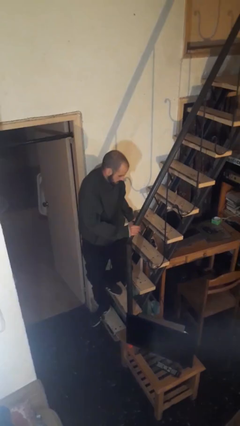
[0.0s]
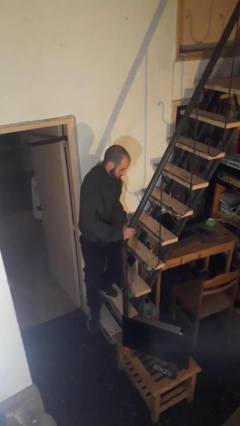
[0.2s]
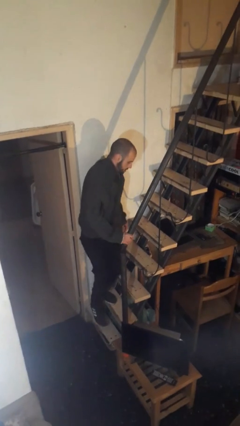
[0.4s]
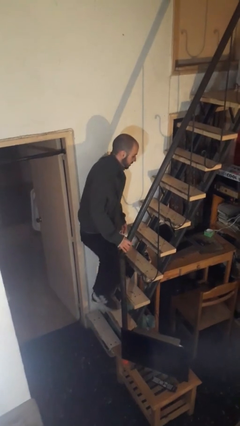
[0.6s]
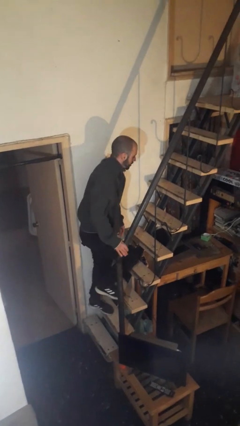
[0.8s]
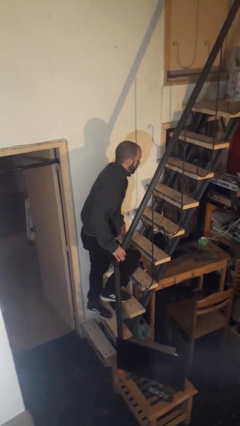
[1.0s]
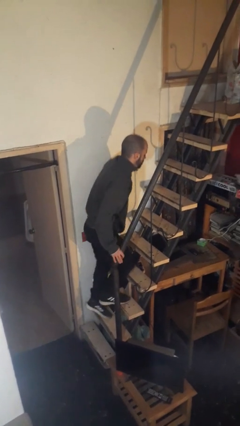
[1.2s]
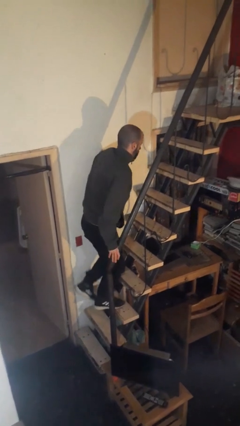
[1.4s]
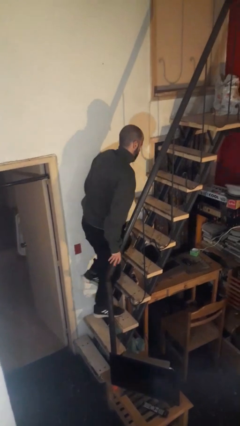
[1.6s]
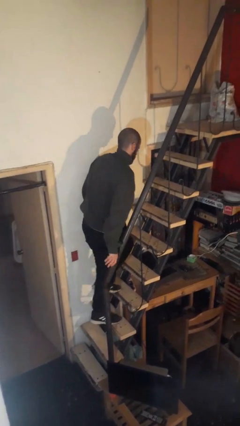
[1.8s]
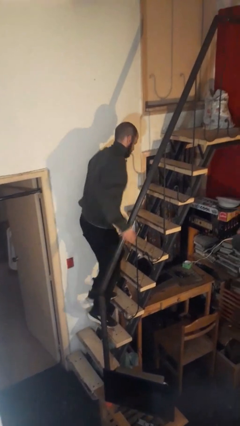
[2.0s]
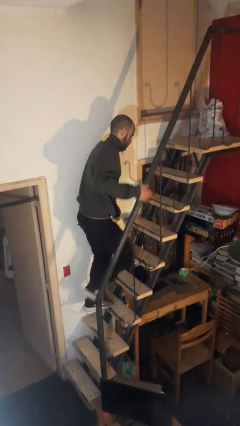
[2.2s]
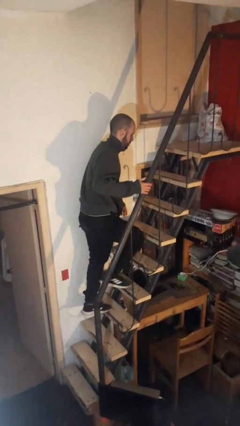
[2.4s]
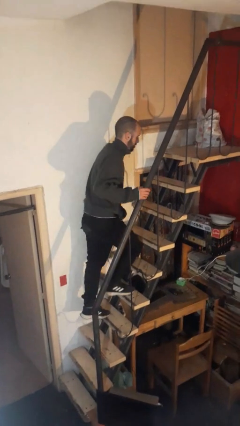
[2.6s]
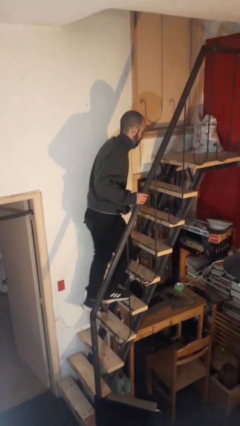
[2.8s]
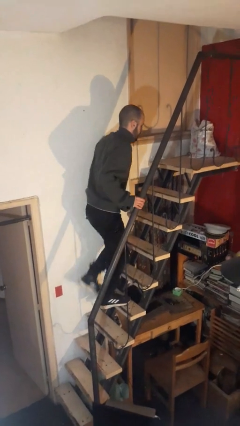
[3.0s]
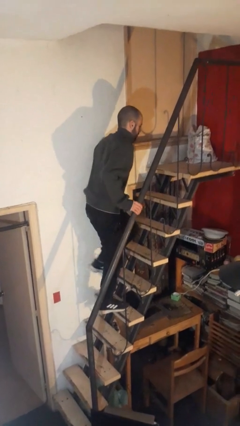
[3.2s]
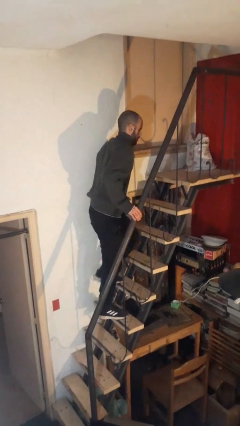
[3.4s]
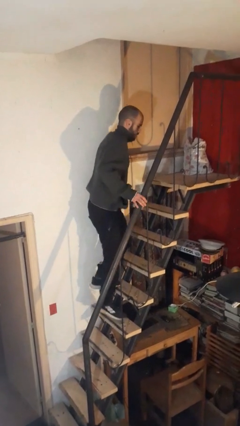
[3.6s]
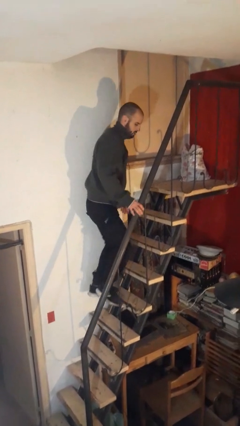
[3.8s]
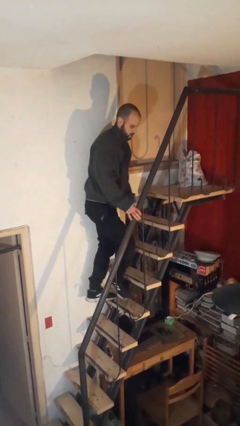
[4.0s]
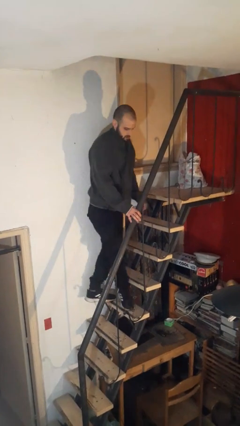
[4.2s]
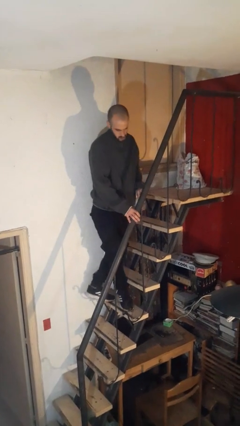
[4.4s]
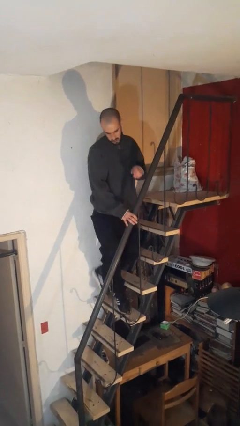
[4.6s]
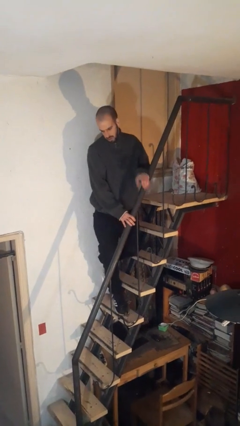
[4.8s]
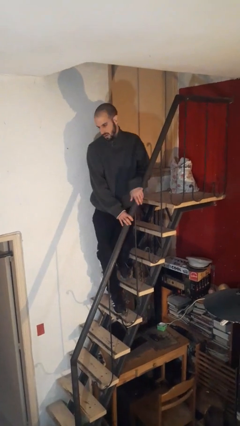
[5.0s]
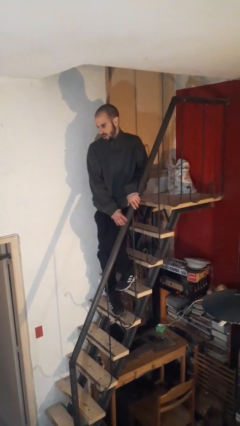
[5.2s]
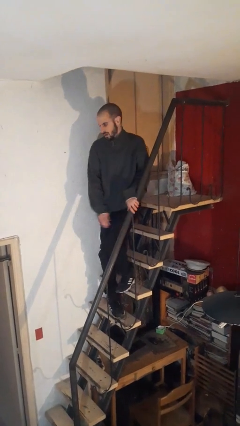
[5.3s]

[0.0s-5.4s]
person climbs up stairs

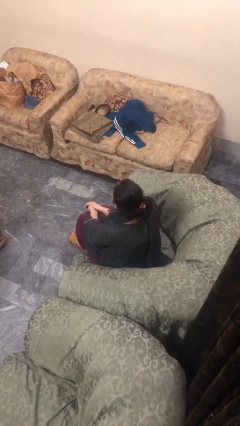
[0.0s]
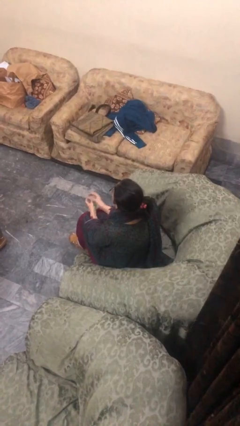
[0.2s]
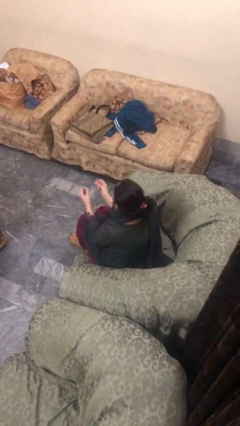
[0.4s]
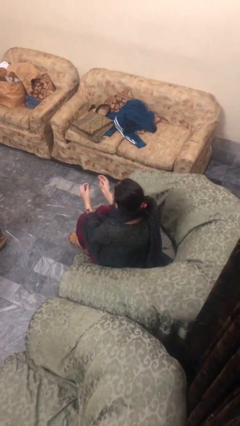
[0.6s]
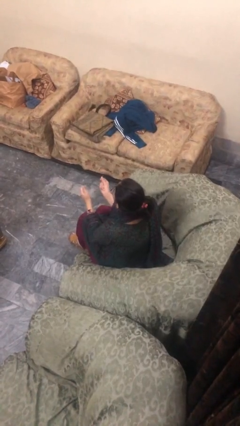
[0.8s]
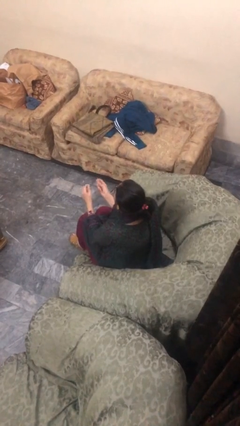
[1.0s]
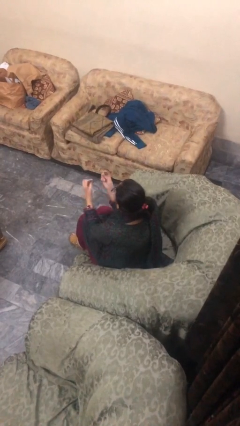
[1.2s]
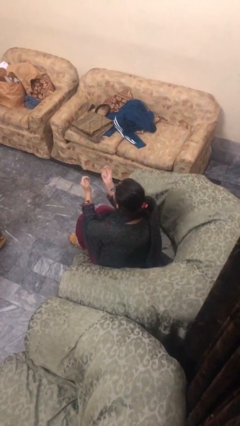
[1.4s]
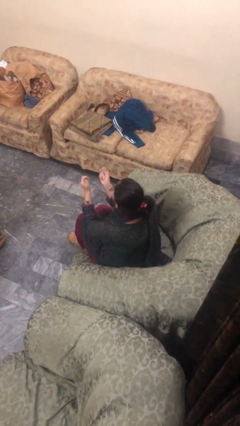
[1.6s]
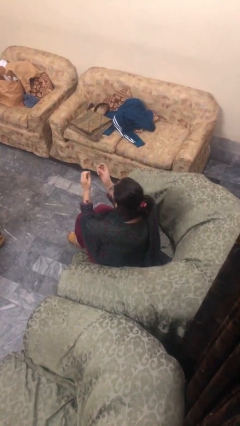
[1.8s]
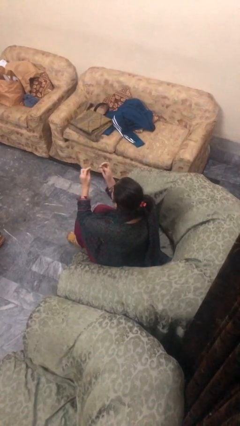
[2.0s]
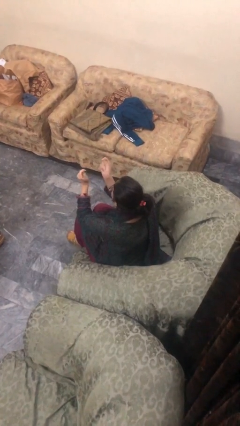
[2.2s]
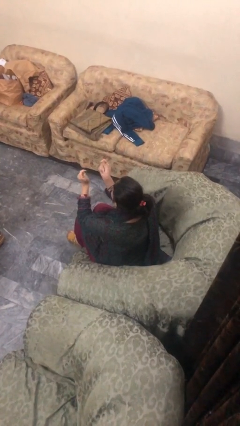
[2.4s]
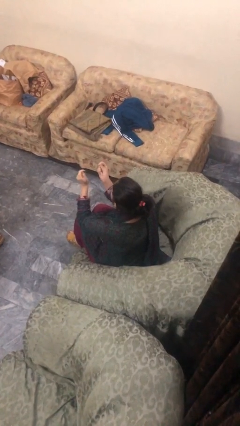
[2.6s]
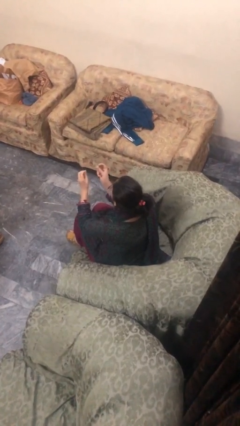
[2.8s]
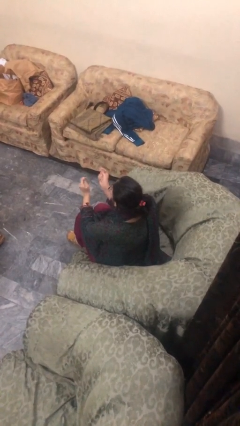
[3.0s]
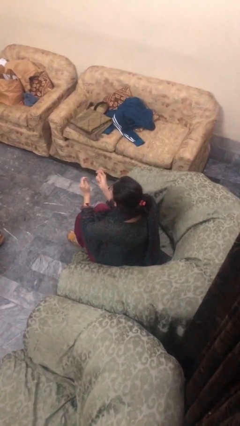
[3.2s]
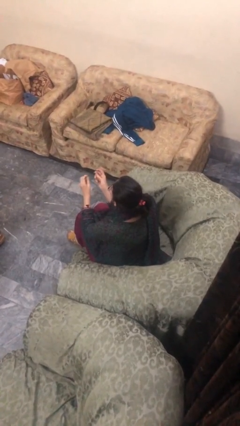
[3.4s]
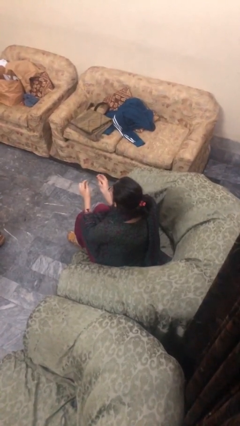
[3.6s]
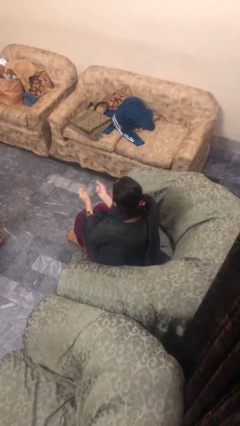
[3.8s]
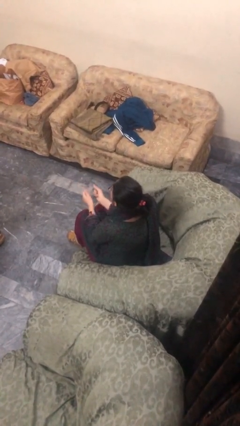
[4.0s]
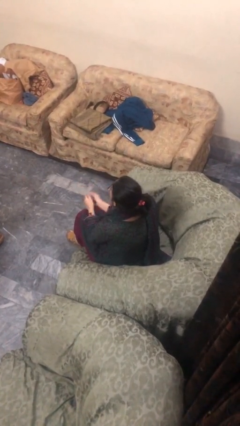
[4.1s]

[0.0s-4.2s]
person snaps fingers

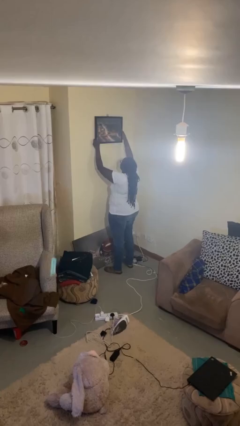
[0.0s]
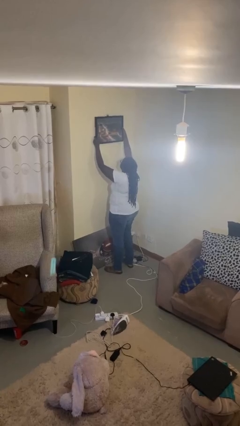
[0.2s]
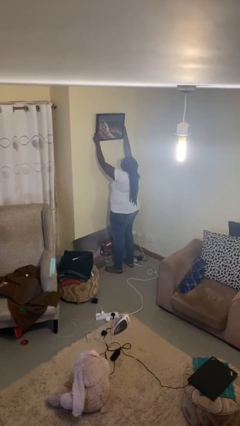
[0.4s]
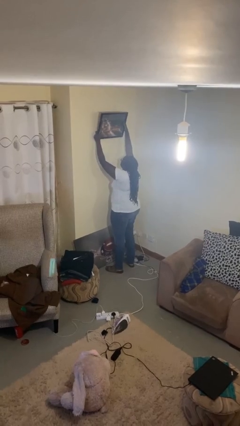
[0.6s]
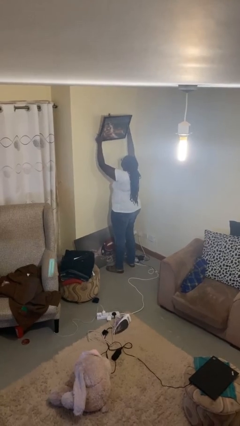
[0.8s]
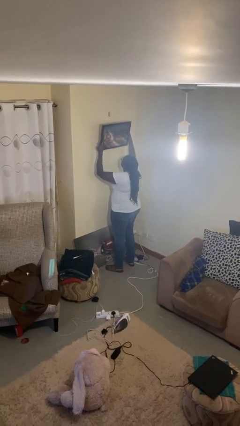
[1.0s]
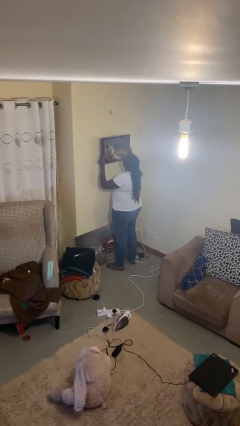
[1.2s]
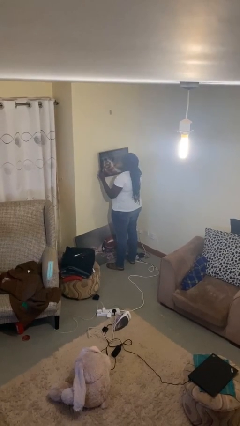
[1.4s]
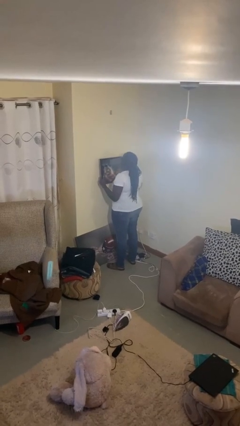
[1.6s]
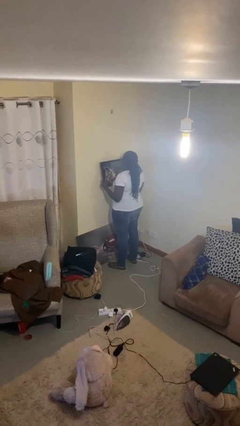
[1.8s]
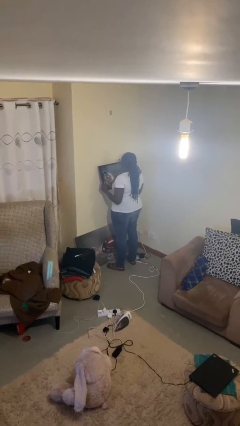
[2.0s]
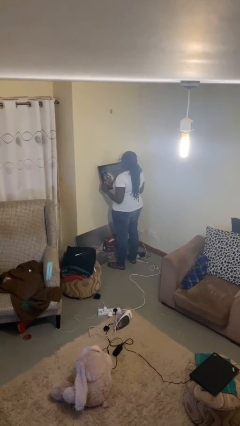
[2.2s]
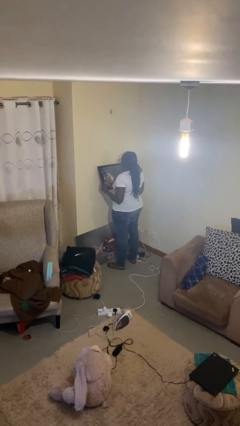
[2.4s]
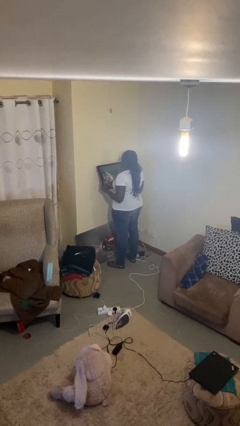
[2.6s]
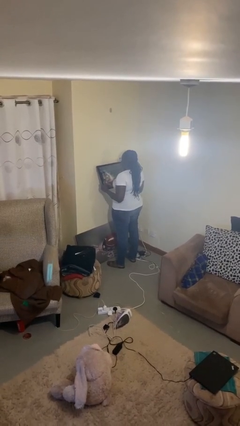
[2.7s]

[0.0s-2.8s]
person takes down picture frame

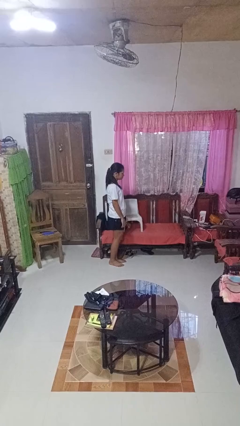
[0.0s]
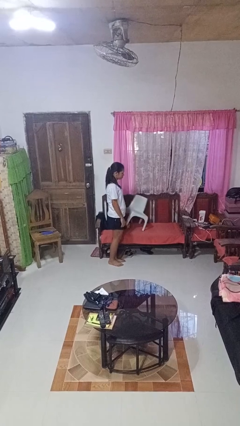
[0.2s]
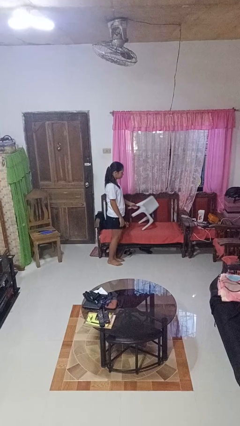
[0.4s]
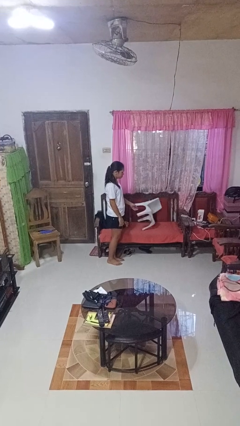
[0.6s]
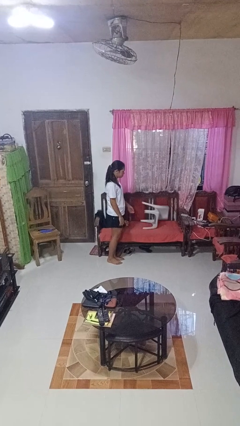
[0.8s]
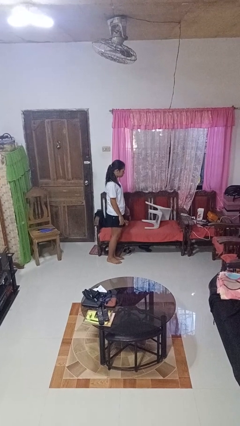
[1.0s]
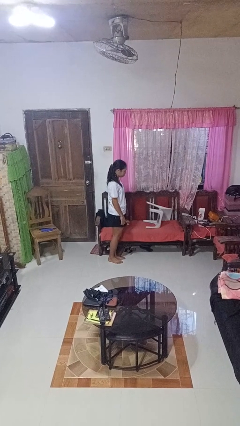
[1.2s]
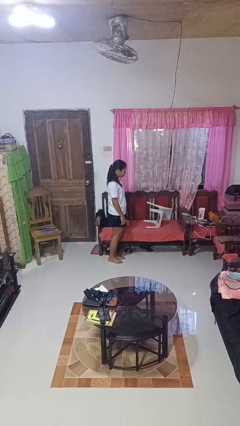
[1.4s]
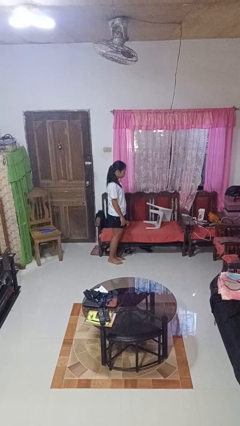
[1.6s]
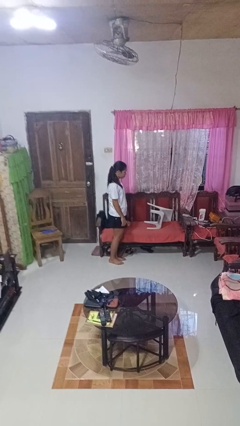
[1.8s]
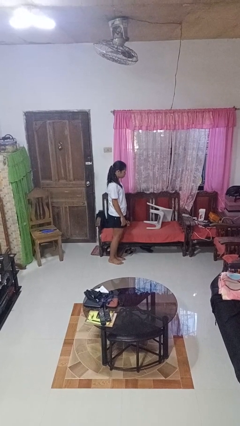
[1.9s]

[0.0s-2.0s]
person knocks over furniture

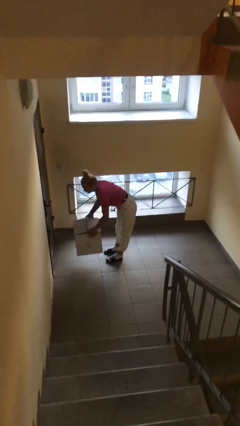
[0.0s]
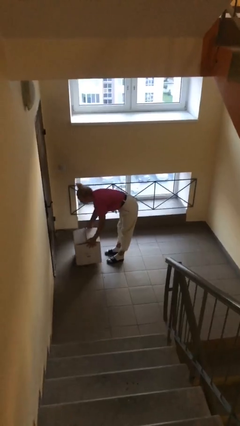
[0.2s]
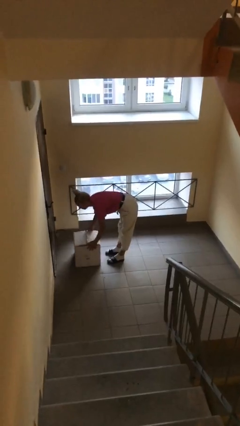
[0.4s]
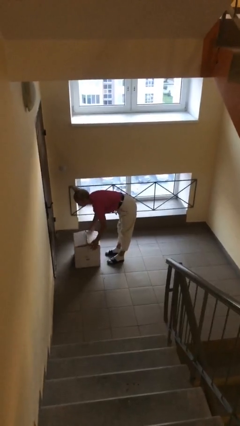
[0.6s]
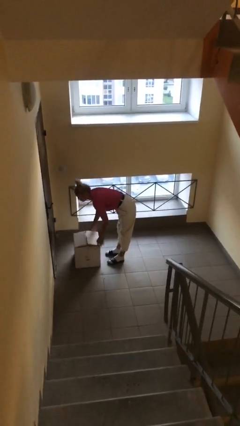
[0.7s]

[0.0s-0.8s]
person puts down object on floor

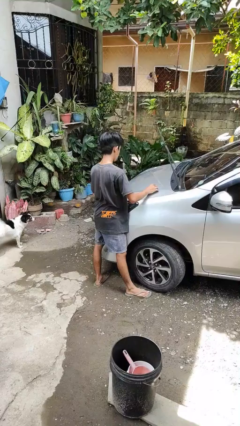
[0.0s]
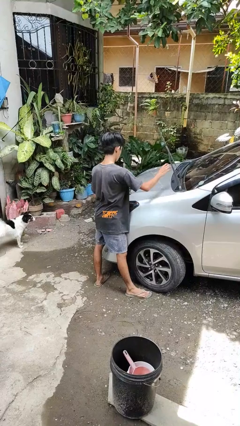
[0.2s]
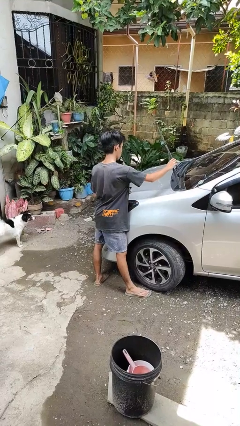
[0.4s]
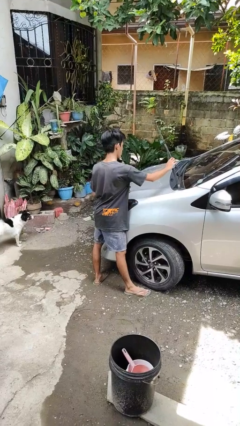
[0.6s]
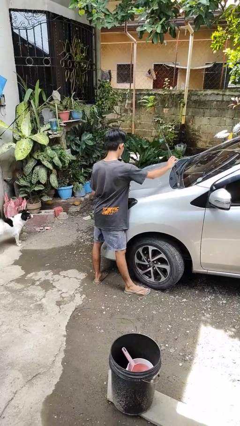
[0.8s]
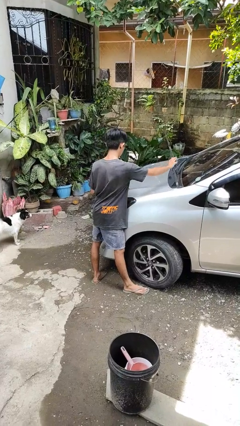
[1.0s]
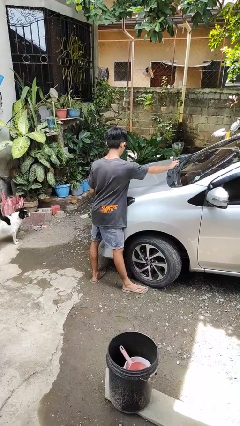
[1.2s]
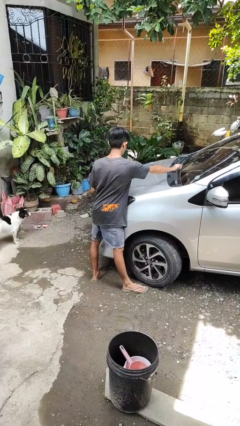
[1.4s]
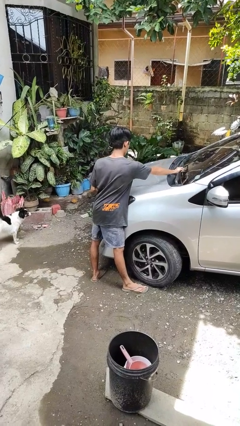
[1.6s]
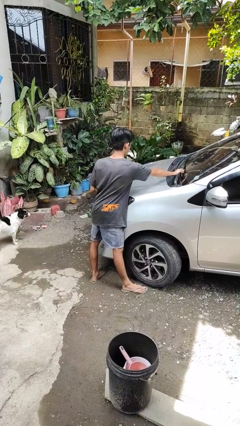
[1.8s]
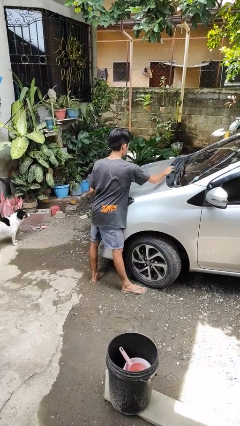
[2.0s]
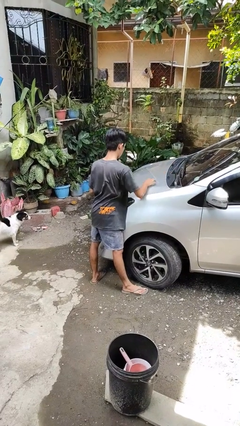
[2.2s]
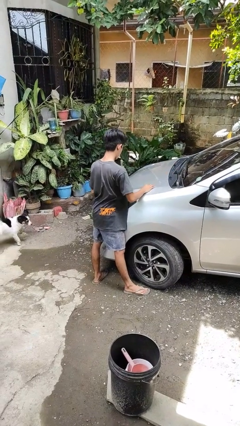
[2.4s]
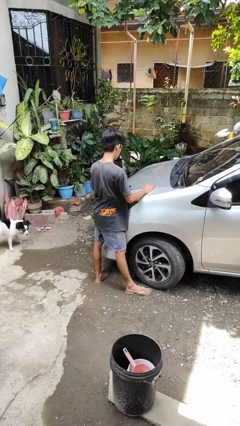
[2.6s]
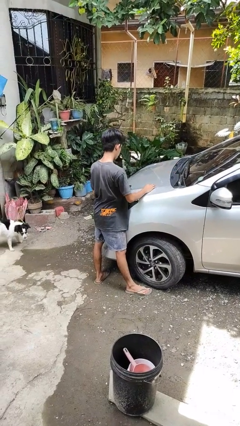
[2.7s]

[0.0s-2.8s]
person flips down car wipers
